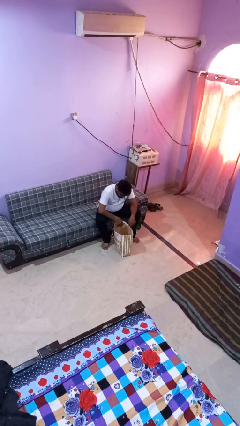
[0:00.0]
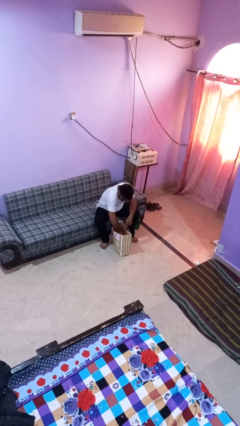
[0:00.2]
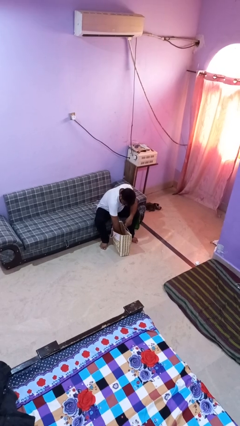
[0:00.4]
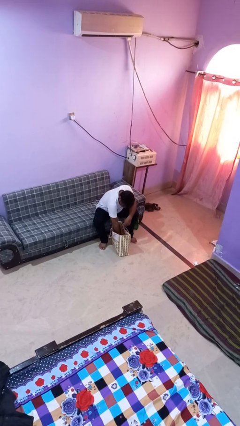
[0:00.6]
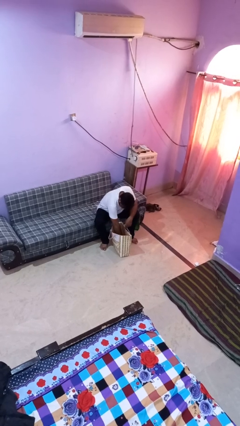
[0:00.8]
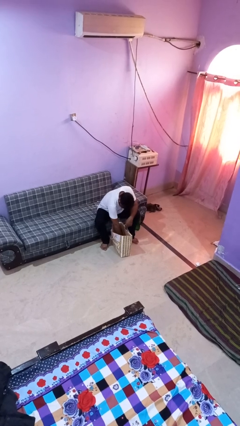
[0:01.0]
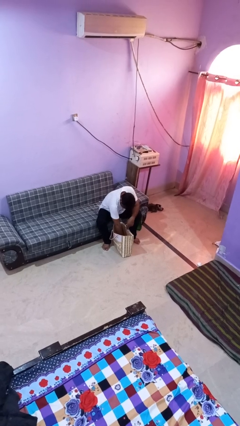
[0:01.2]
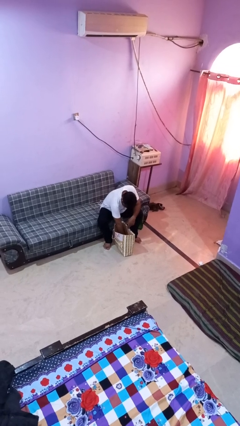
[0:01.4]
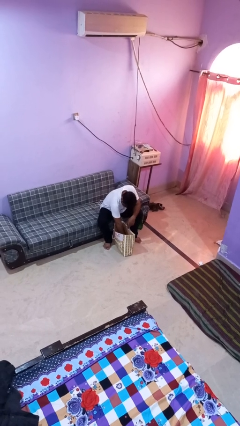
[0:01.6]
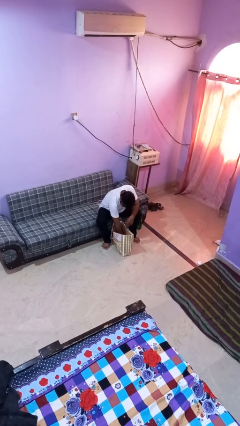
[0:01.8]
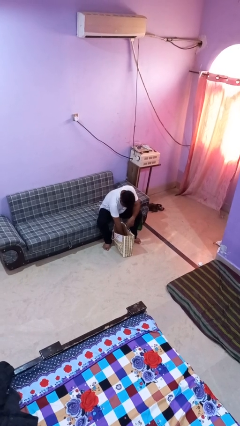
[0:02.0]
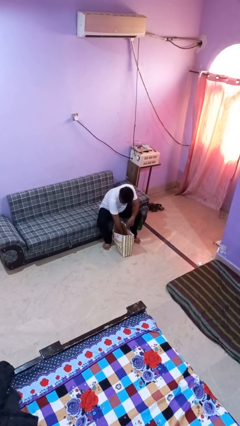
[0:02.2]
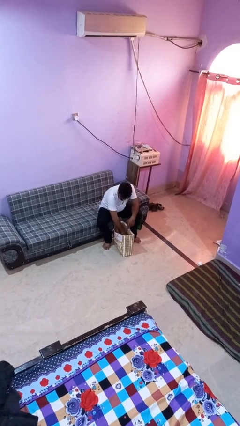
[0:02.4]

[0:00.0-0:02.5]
person searches in bag

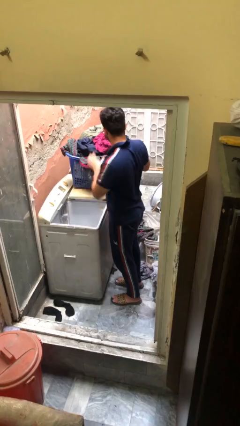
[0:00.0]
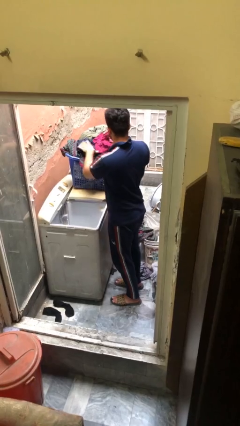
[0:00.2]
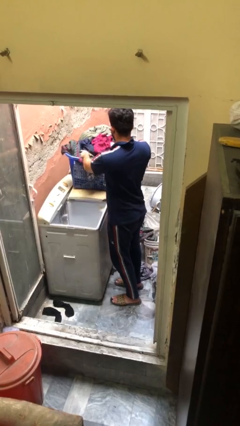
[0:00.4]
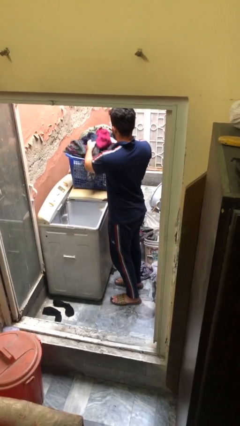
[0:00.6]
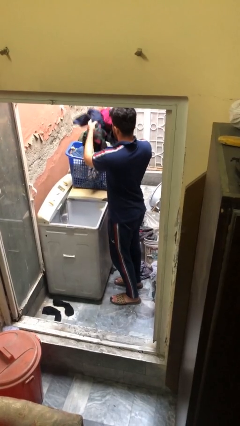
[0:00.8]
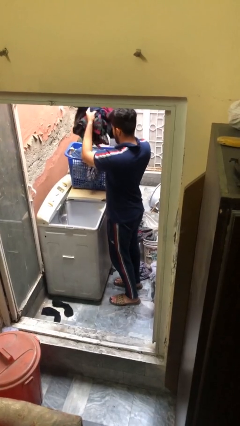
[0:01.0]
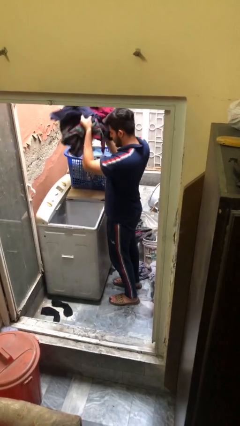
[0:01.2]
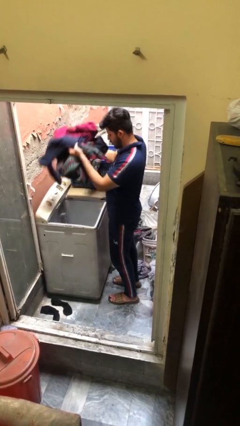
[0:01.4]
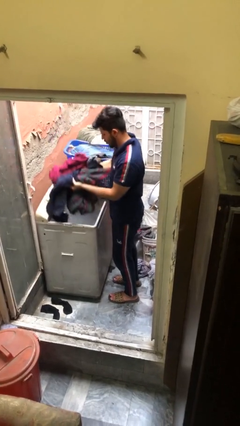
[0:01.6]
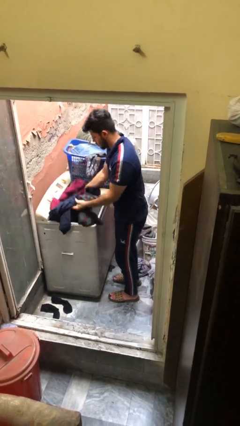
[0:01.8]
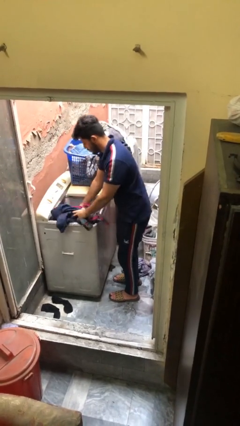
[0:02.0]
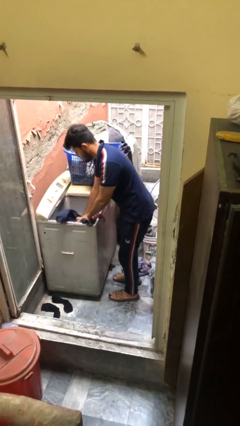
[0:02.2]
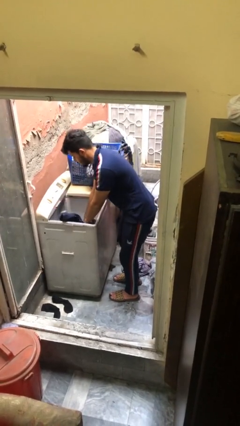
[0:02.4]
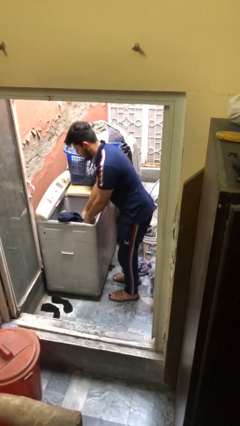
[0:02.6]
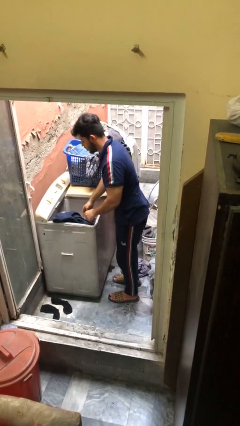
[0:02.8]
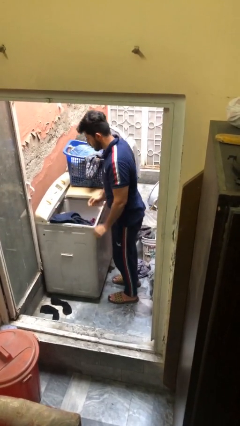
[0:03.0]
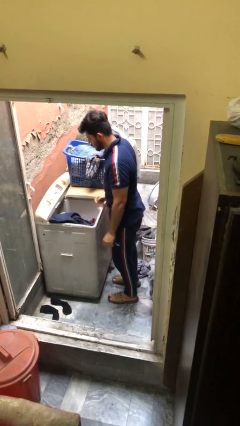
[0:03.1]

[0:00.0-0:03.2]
person loads clotheswasher

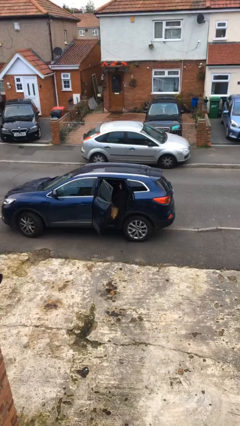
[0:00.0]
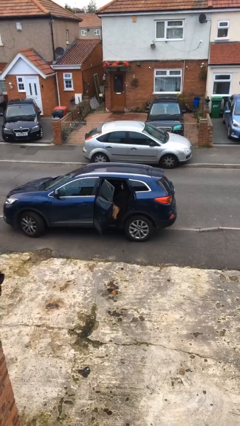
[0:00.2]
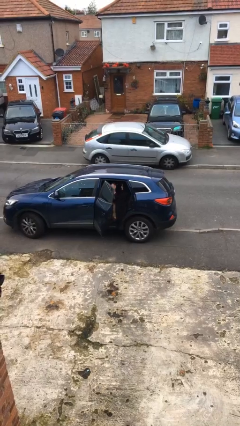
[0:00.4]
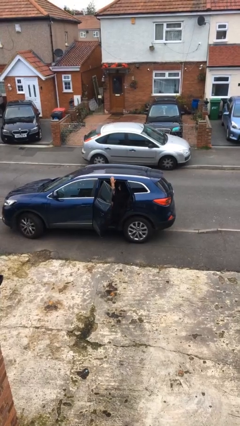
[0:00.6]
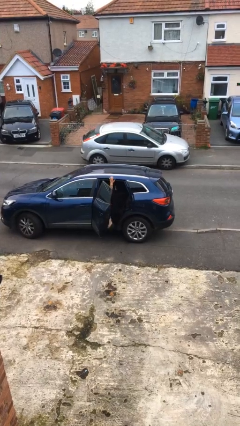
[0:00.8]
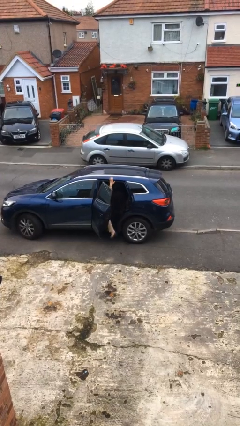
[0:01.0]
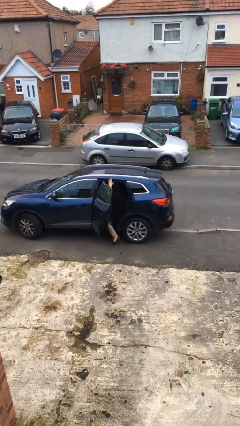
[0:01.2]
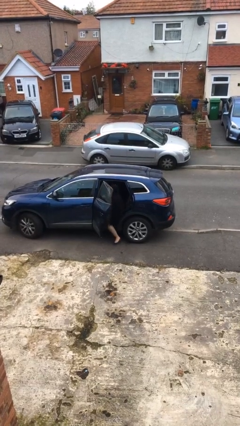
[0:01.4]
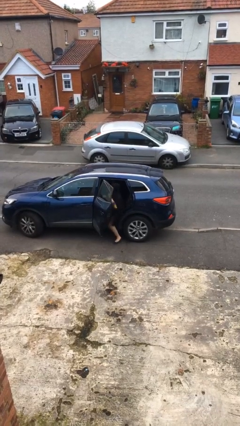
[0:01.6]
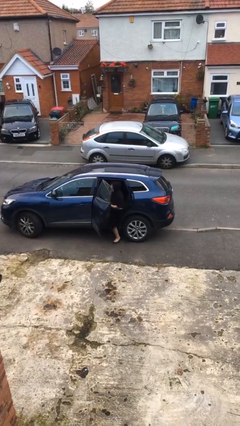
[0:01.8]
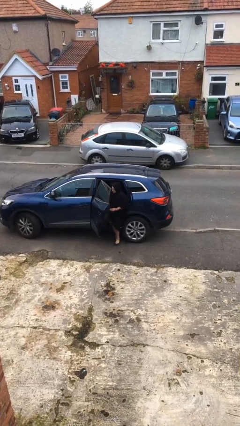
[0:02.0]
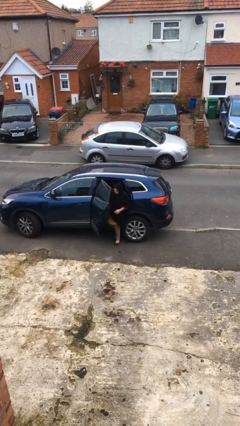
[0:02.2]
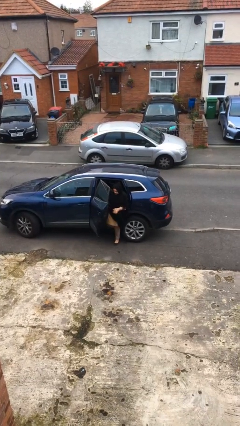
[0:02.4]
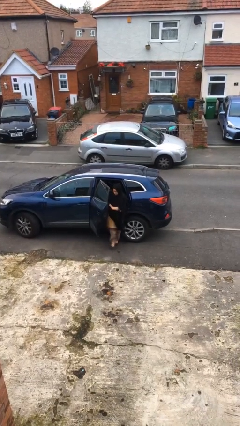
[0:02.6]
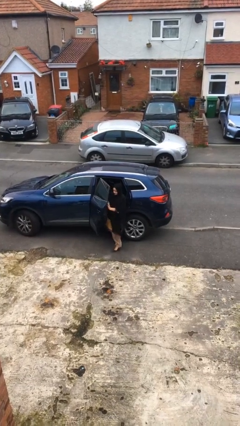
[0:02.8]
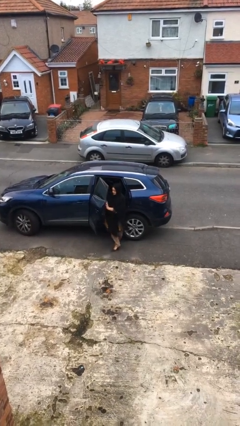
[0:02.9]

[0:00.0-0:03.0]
person exits car

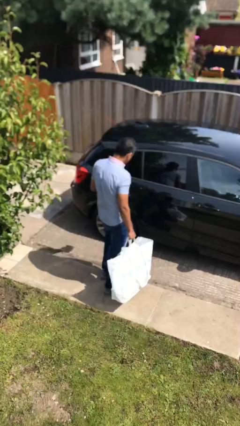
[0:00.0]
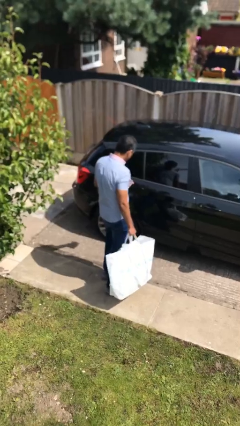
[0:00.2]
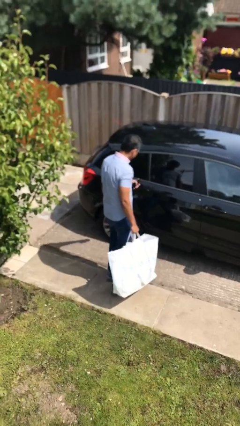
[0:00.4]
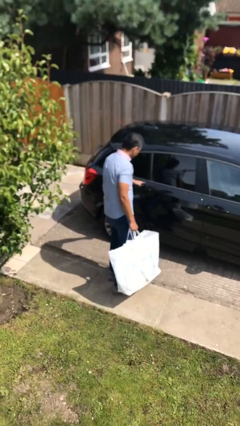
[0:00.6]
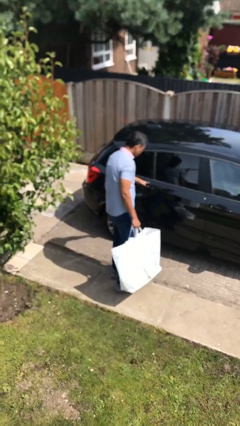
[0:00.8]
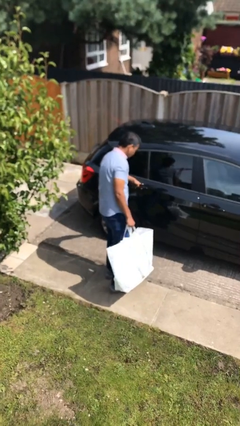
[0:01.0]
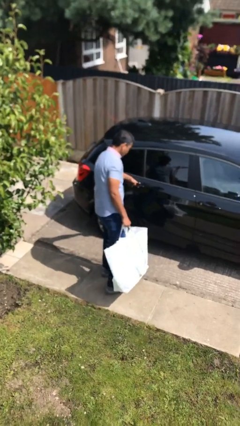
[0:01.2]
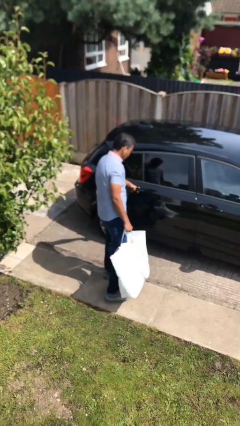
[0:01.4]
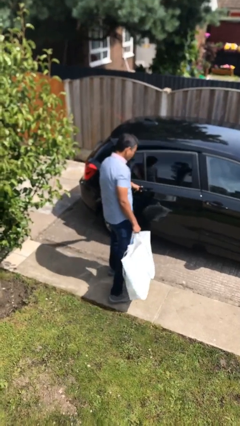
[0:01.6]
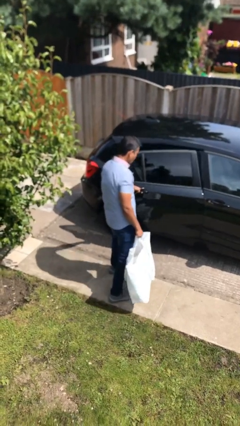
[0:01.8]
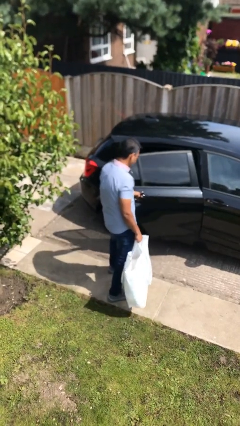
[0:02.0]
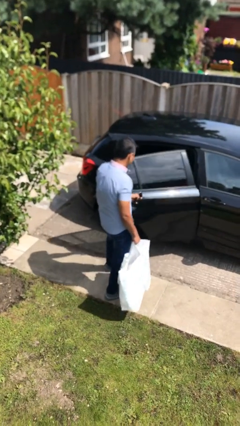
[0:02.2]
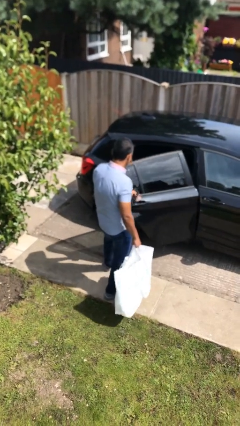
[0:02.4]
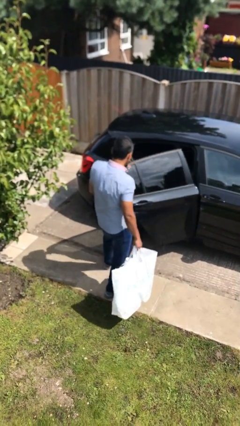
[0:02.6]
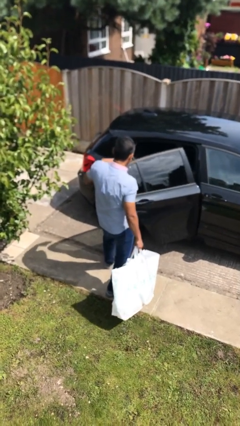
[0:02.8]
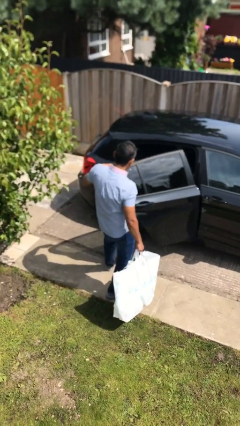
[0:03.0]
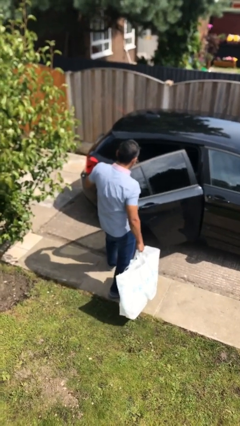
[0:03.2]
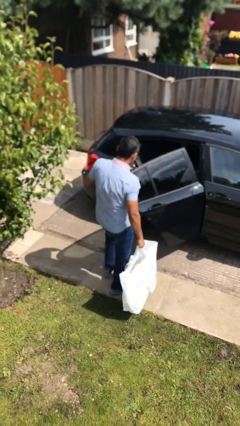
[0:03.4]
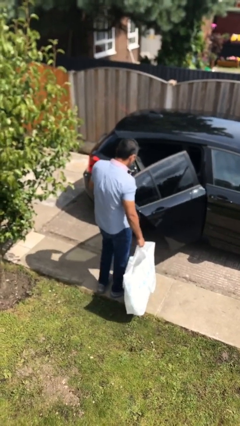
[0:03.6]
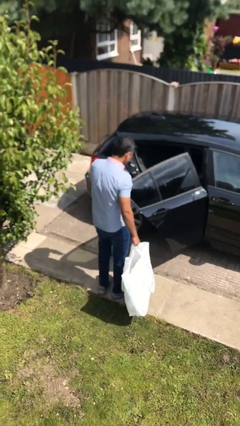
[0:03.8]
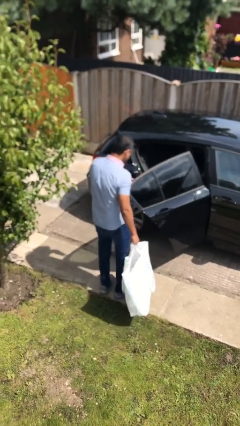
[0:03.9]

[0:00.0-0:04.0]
person opens car door

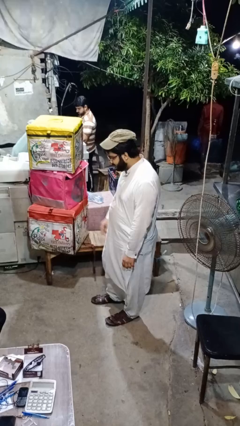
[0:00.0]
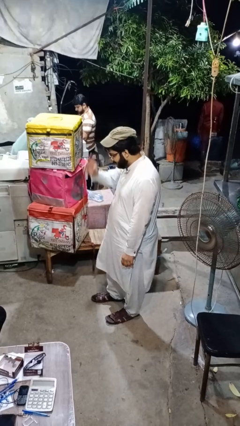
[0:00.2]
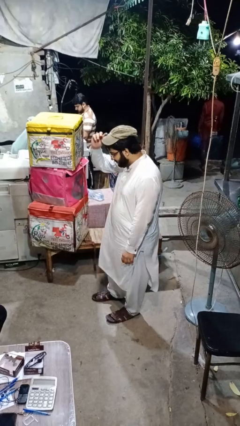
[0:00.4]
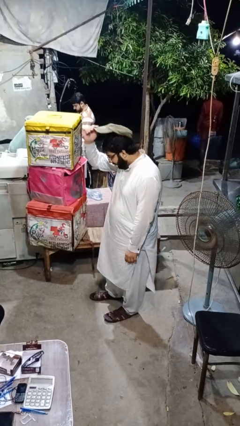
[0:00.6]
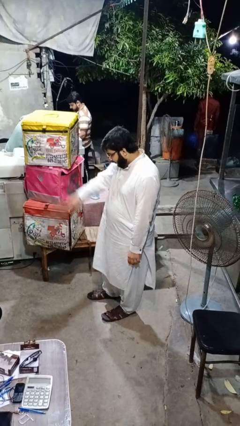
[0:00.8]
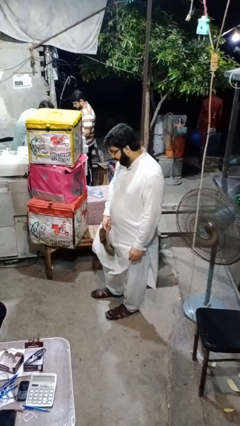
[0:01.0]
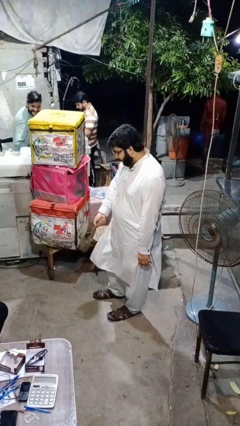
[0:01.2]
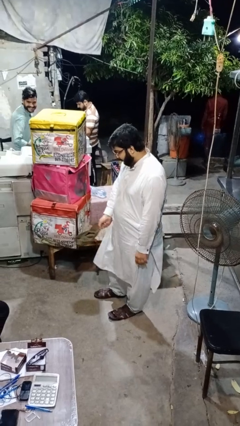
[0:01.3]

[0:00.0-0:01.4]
person takes off hat

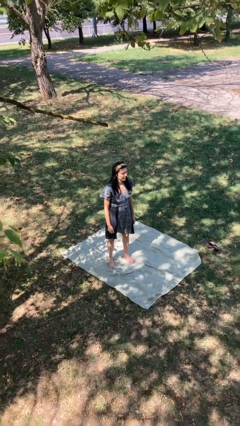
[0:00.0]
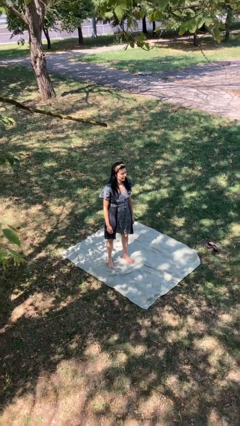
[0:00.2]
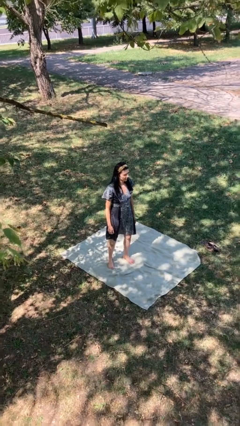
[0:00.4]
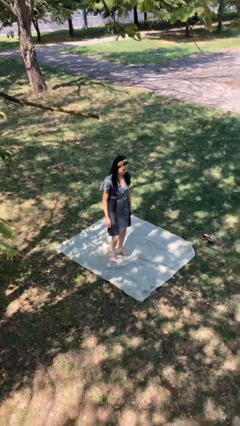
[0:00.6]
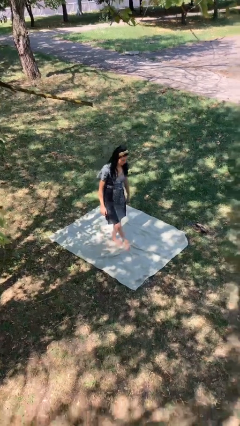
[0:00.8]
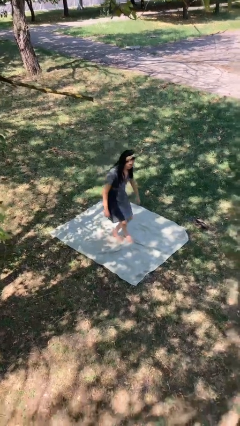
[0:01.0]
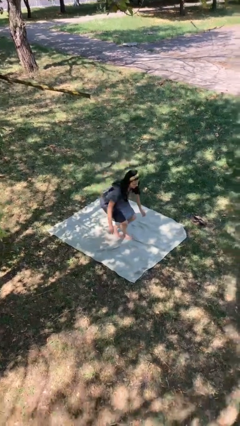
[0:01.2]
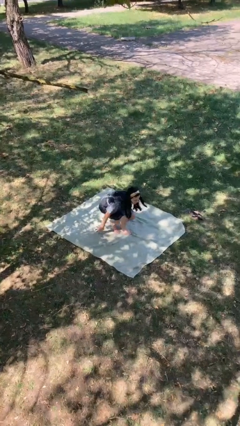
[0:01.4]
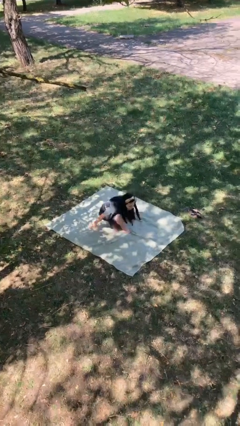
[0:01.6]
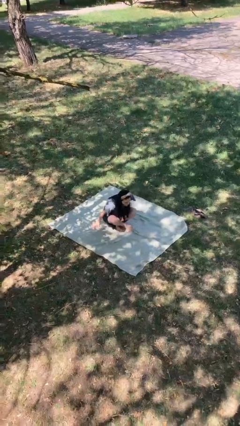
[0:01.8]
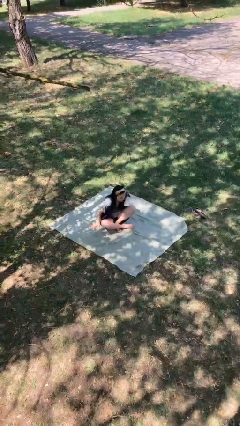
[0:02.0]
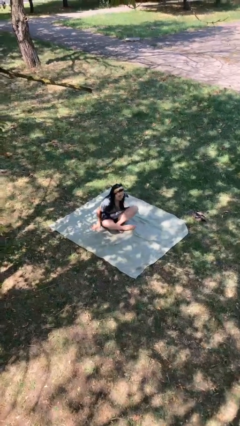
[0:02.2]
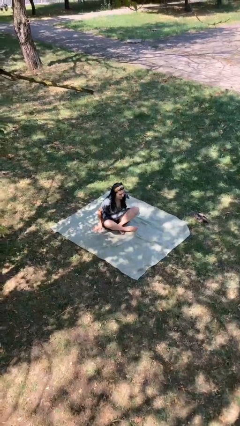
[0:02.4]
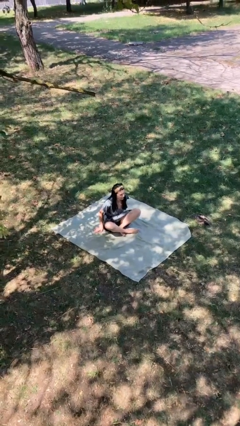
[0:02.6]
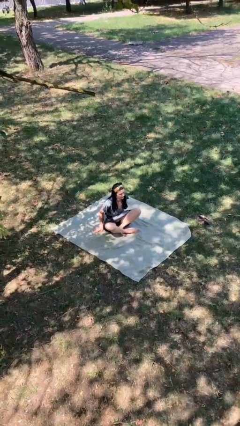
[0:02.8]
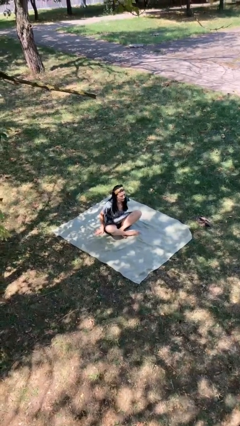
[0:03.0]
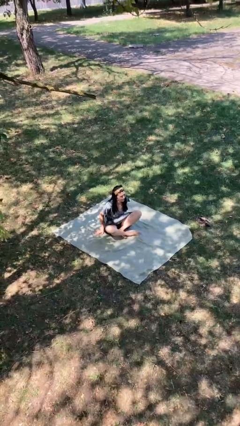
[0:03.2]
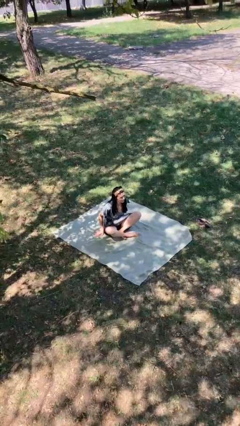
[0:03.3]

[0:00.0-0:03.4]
person sits crisscross
